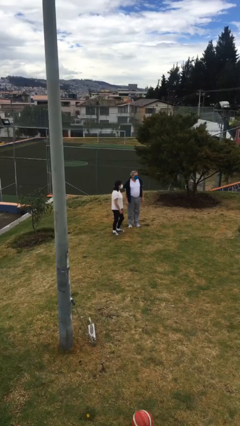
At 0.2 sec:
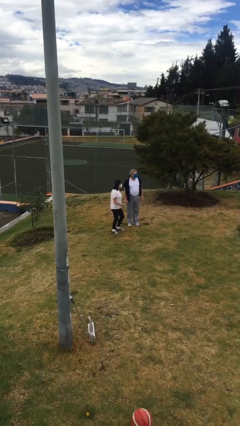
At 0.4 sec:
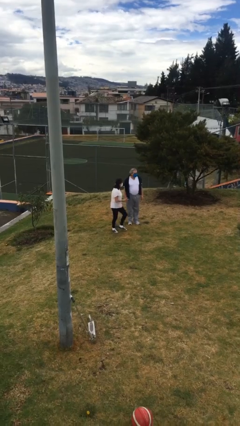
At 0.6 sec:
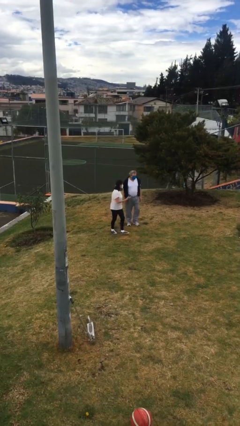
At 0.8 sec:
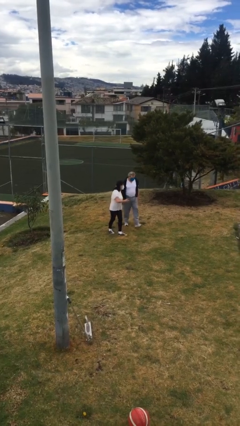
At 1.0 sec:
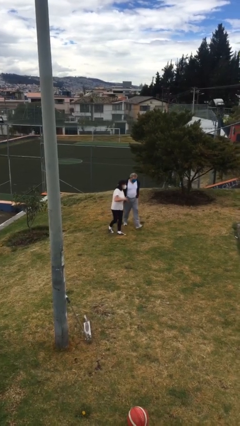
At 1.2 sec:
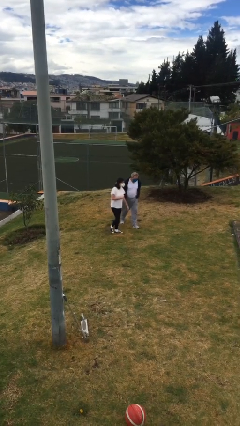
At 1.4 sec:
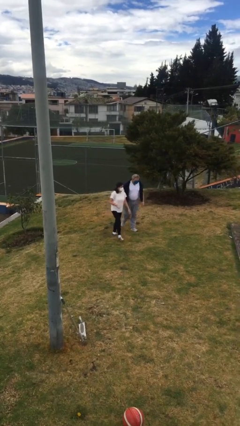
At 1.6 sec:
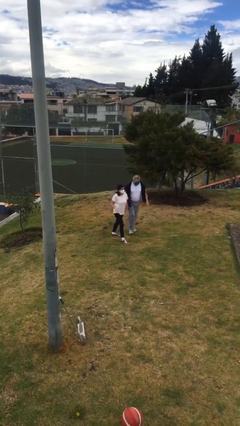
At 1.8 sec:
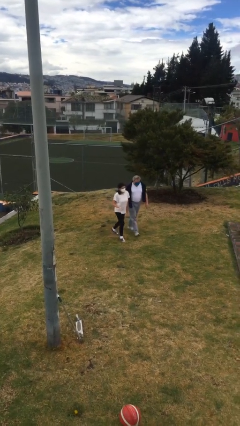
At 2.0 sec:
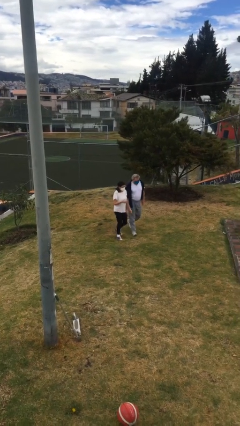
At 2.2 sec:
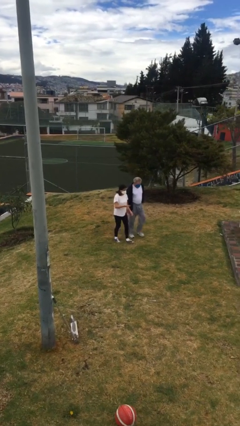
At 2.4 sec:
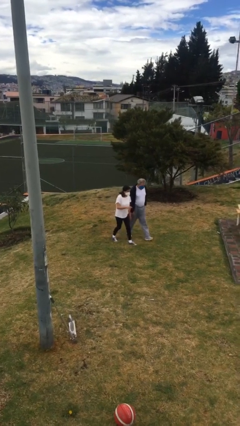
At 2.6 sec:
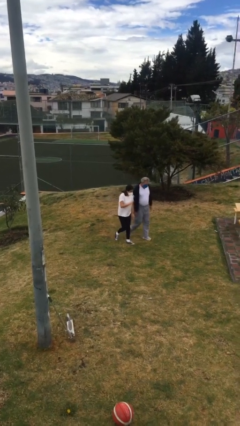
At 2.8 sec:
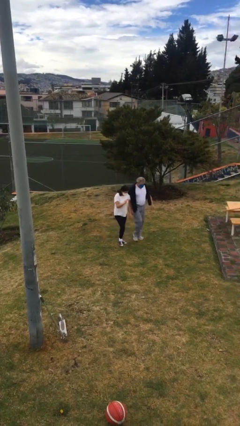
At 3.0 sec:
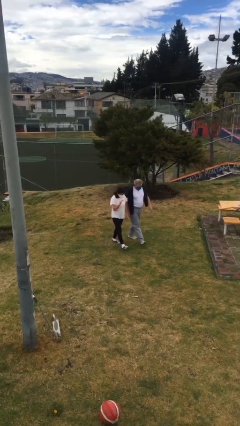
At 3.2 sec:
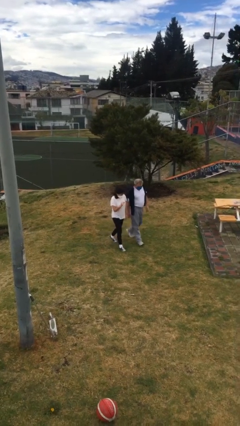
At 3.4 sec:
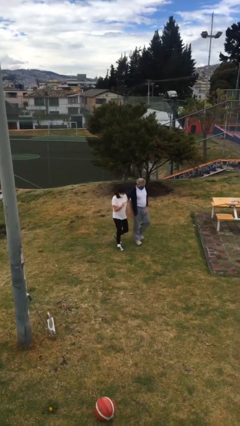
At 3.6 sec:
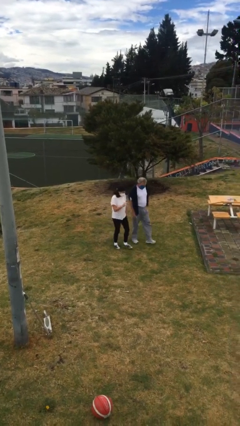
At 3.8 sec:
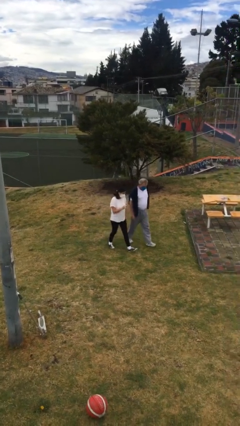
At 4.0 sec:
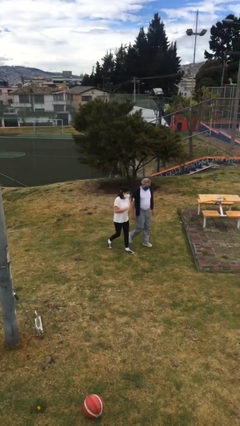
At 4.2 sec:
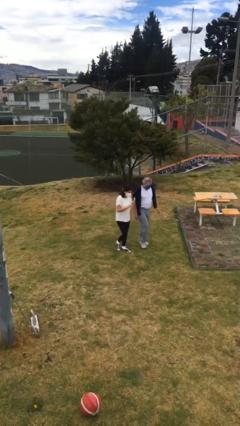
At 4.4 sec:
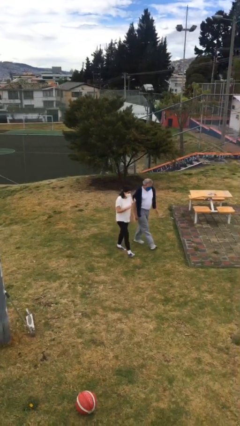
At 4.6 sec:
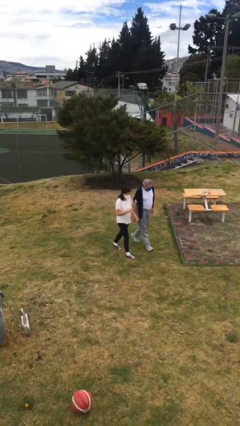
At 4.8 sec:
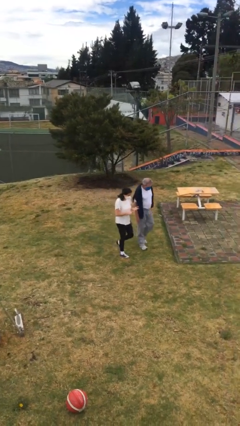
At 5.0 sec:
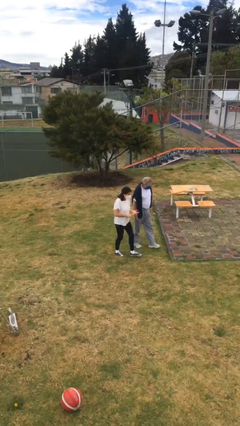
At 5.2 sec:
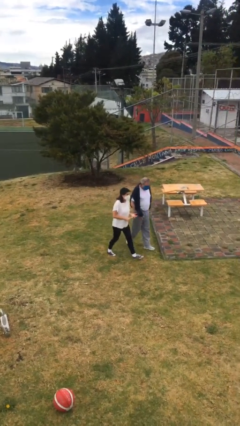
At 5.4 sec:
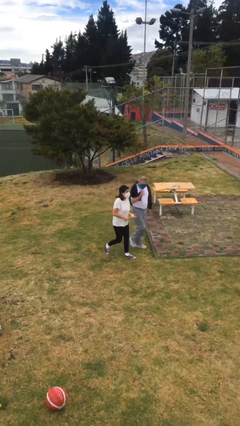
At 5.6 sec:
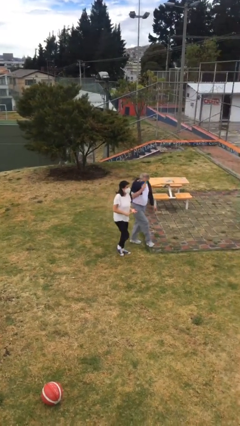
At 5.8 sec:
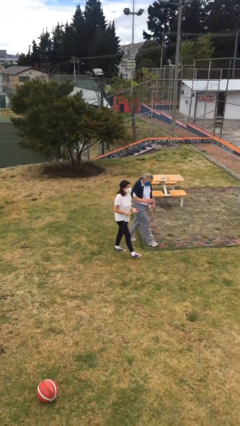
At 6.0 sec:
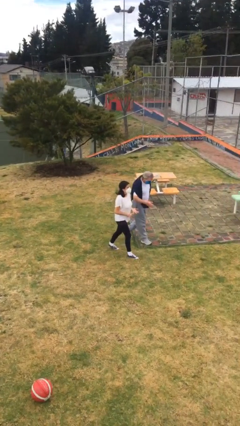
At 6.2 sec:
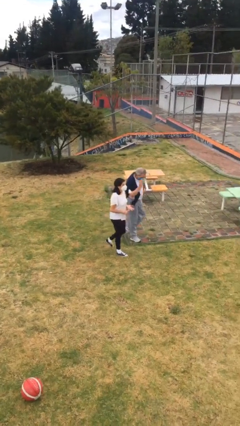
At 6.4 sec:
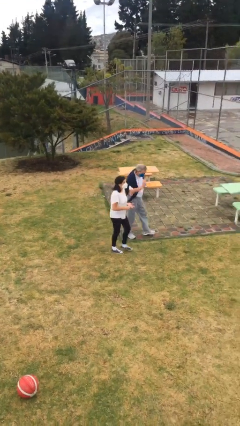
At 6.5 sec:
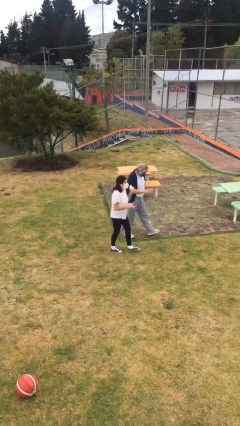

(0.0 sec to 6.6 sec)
person talks to person

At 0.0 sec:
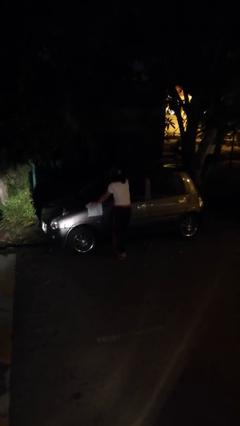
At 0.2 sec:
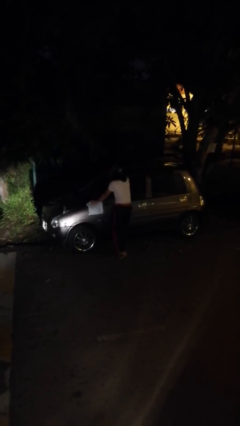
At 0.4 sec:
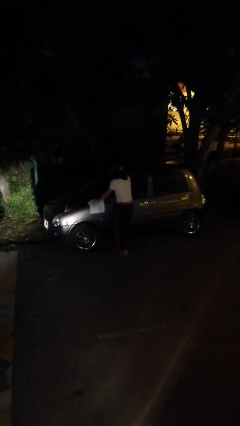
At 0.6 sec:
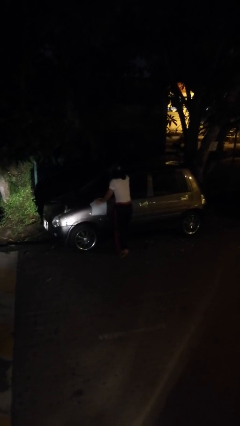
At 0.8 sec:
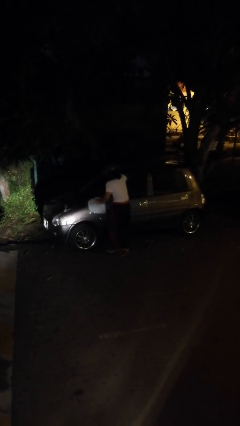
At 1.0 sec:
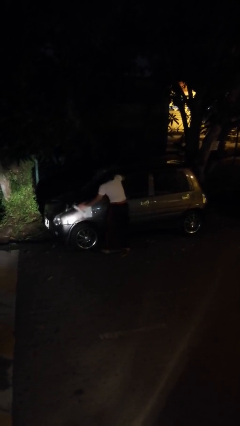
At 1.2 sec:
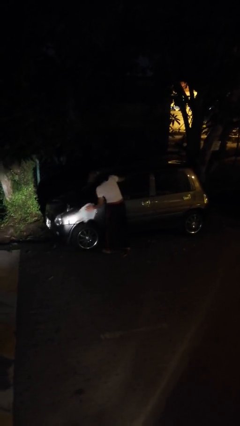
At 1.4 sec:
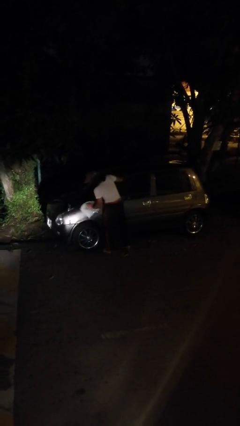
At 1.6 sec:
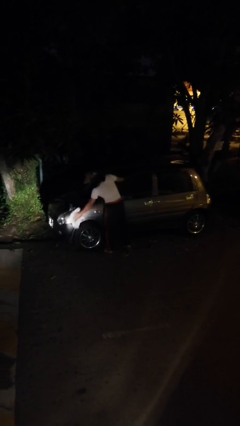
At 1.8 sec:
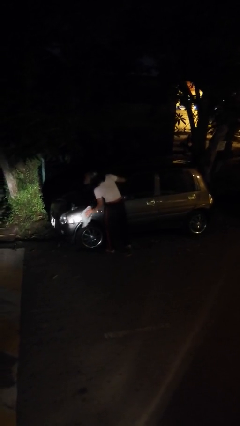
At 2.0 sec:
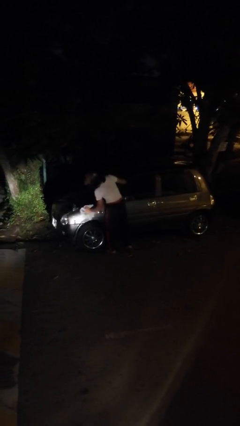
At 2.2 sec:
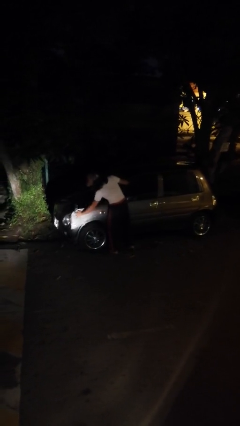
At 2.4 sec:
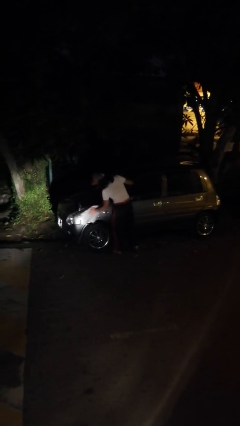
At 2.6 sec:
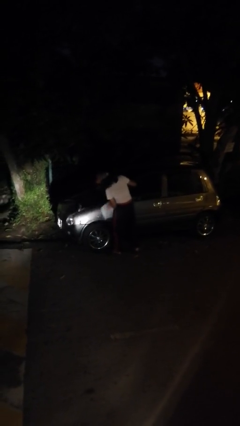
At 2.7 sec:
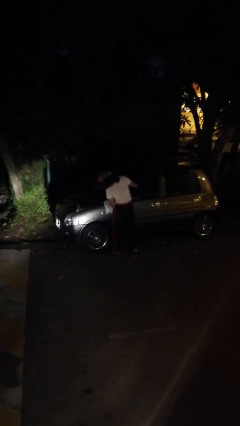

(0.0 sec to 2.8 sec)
person polishes car with rag

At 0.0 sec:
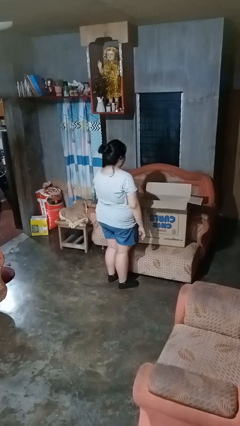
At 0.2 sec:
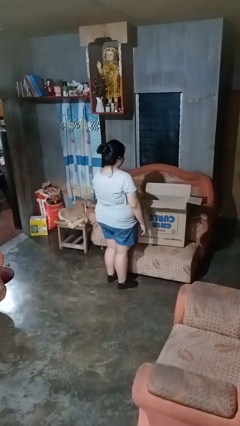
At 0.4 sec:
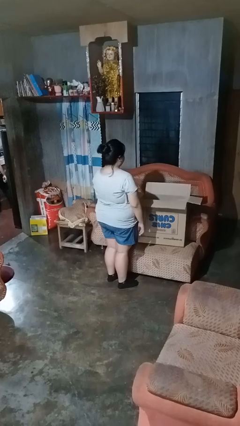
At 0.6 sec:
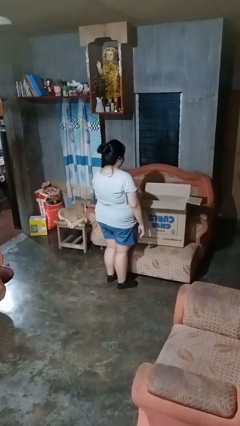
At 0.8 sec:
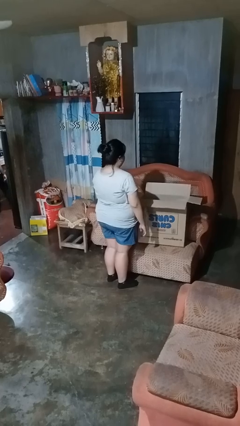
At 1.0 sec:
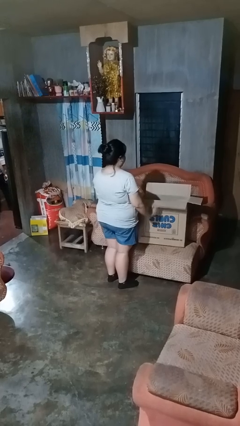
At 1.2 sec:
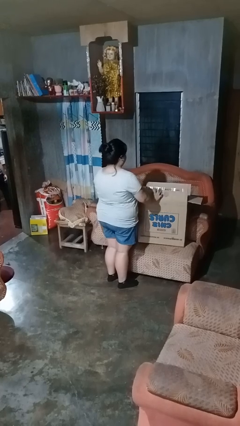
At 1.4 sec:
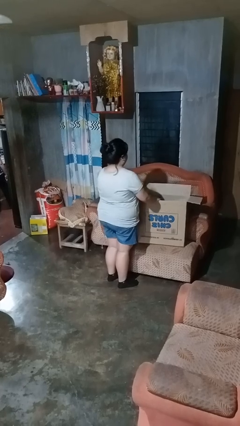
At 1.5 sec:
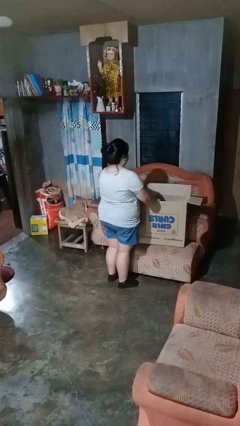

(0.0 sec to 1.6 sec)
person closes box

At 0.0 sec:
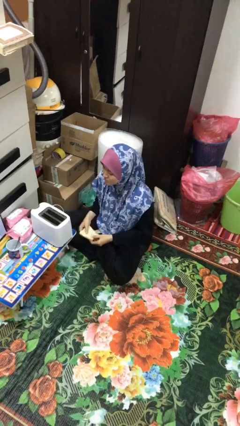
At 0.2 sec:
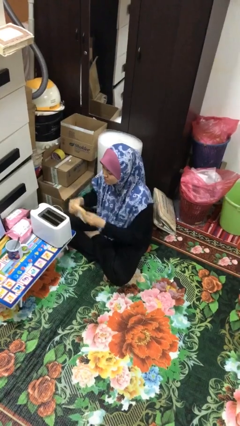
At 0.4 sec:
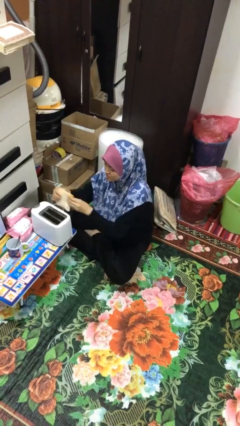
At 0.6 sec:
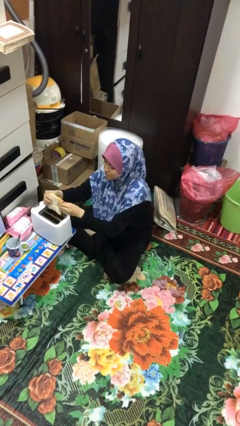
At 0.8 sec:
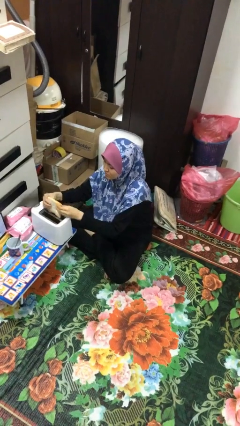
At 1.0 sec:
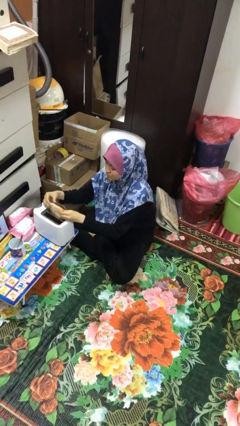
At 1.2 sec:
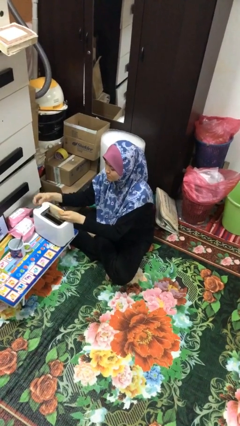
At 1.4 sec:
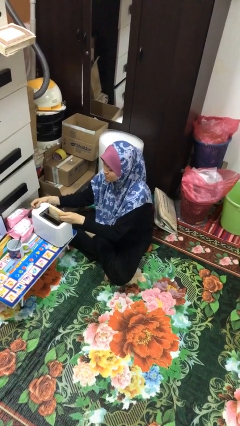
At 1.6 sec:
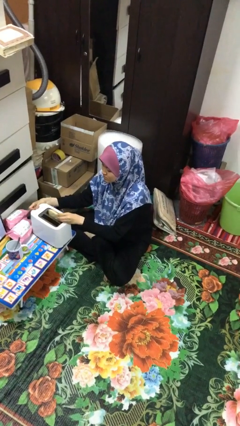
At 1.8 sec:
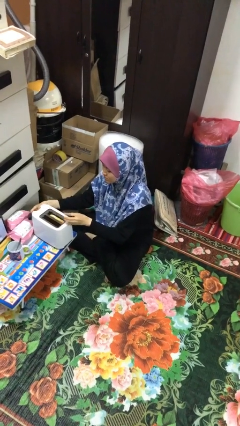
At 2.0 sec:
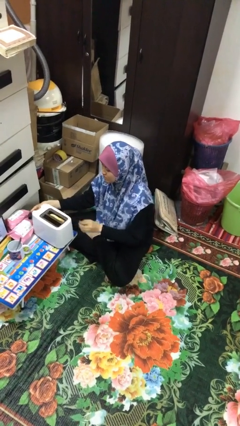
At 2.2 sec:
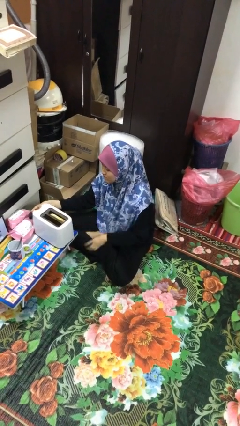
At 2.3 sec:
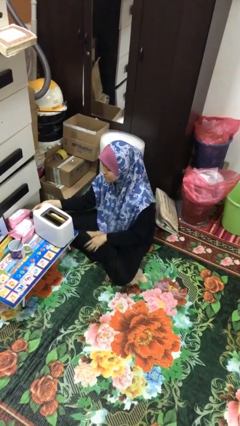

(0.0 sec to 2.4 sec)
person puts object into toaster

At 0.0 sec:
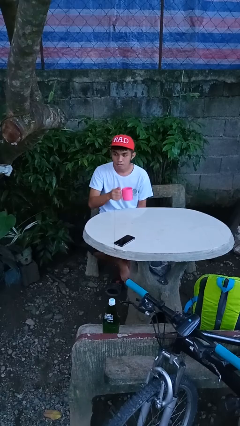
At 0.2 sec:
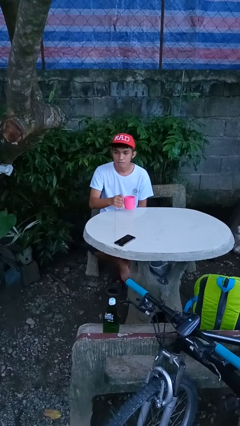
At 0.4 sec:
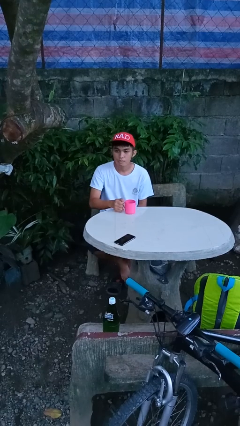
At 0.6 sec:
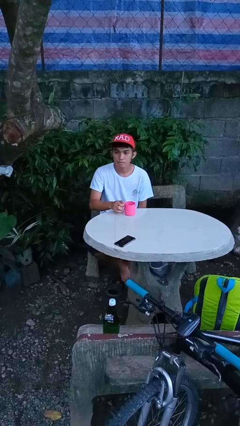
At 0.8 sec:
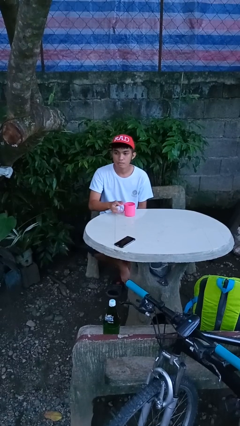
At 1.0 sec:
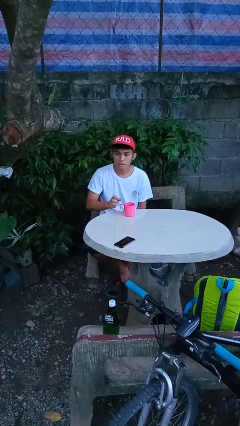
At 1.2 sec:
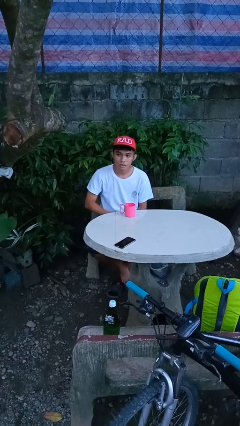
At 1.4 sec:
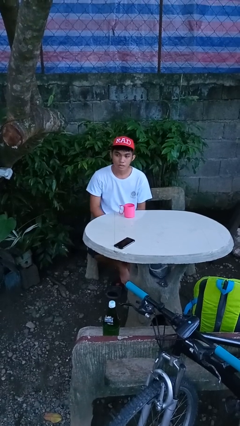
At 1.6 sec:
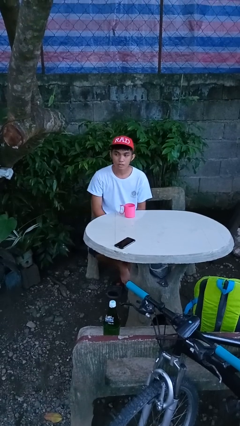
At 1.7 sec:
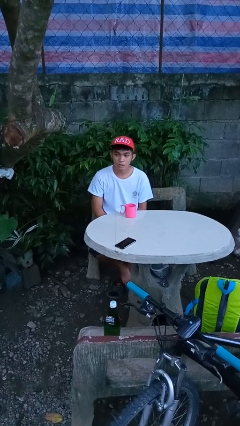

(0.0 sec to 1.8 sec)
person puts down object on table

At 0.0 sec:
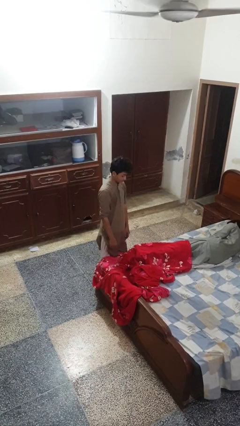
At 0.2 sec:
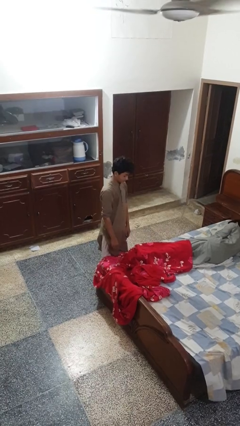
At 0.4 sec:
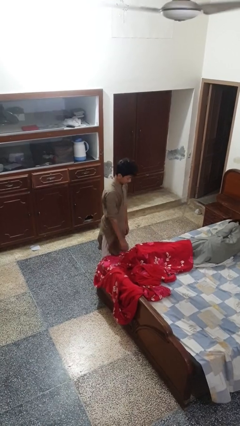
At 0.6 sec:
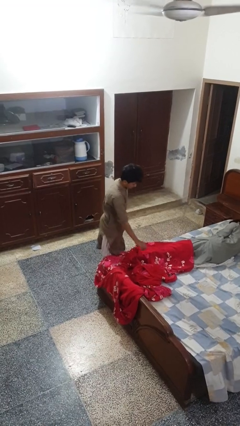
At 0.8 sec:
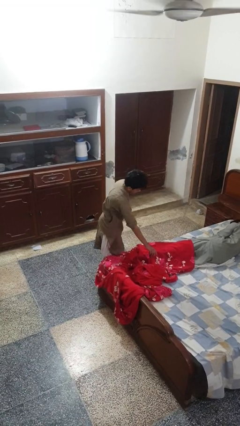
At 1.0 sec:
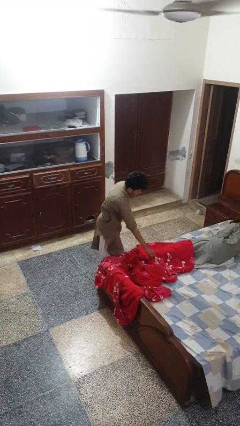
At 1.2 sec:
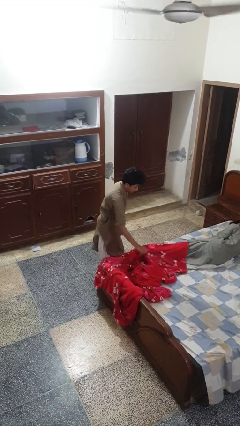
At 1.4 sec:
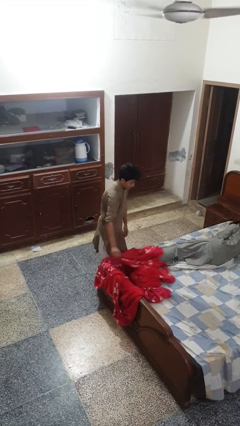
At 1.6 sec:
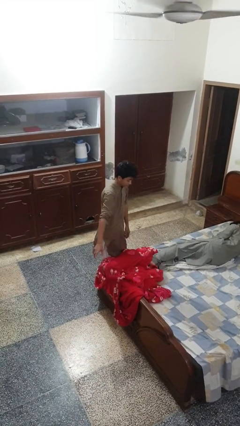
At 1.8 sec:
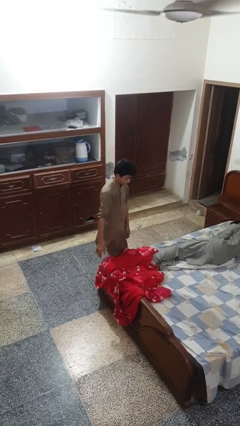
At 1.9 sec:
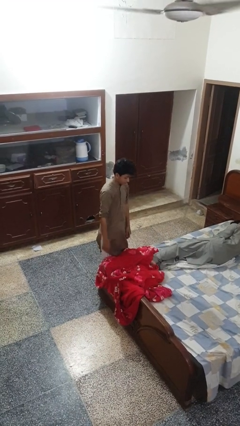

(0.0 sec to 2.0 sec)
person uncovers friend with blanket

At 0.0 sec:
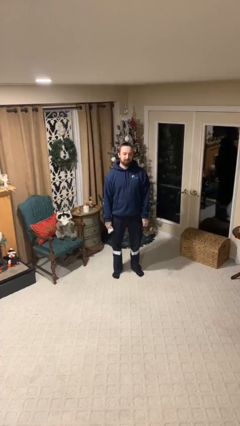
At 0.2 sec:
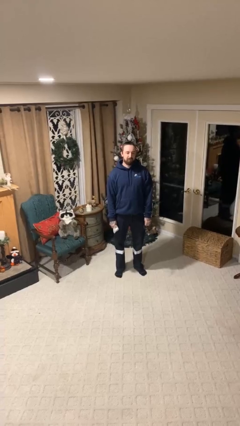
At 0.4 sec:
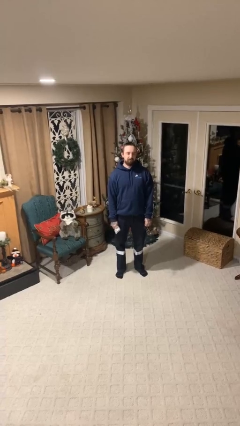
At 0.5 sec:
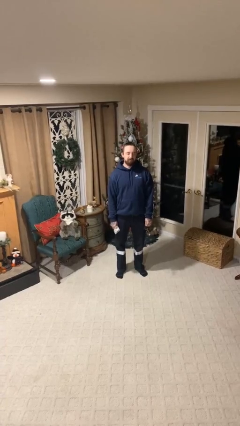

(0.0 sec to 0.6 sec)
person cleans eyeglasses
